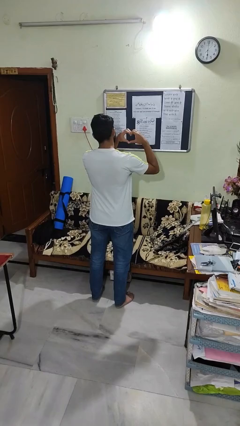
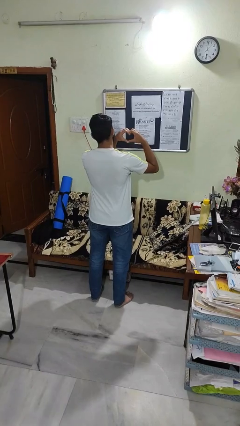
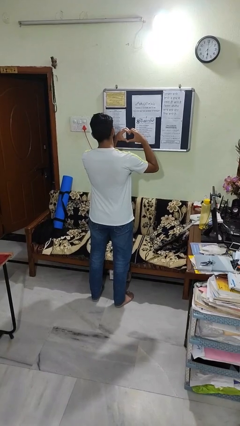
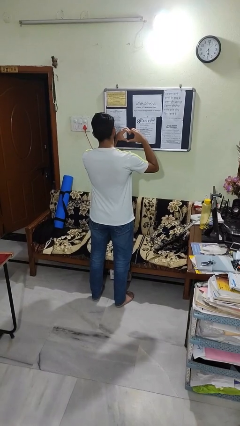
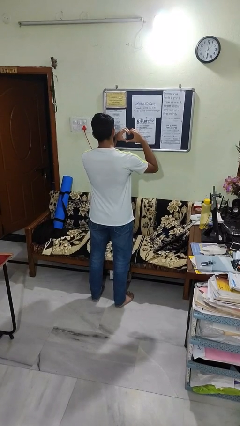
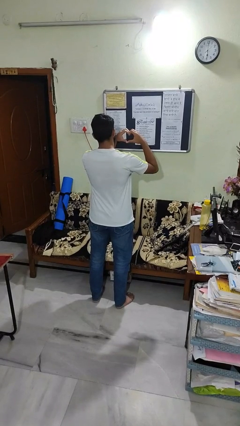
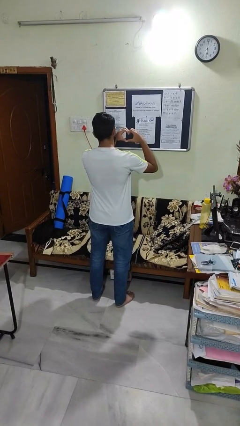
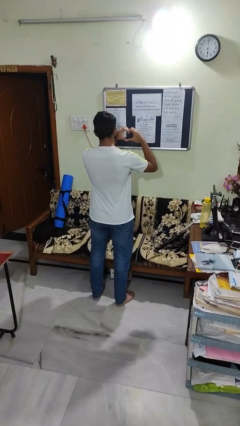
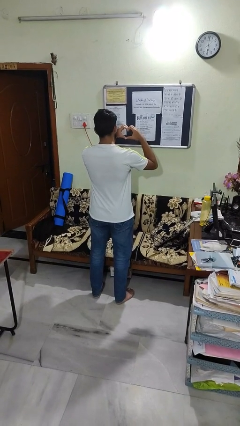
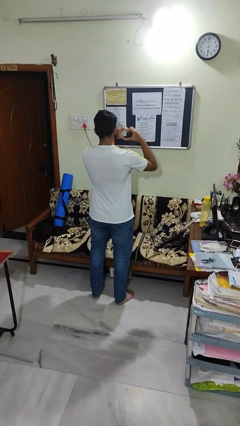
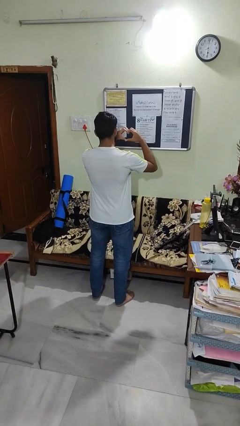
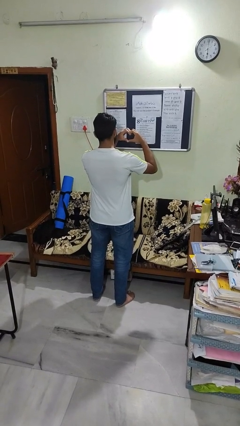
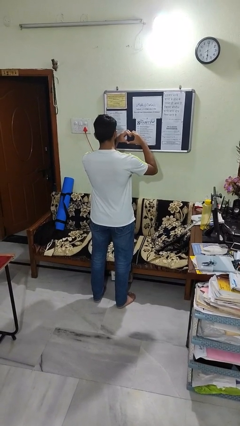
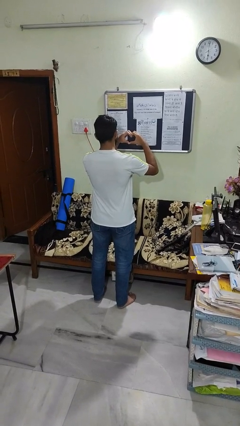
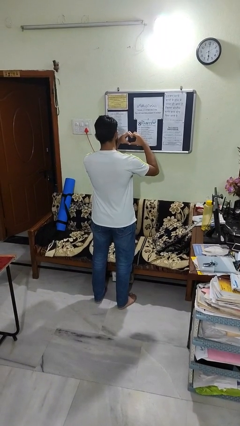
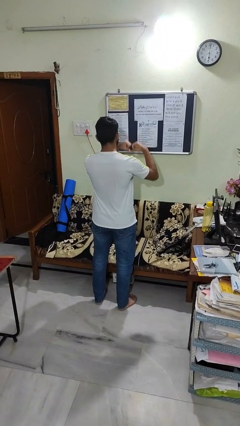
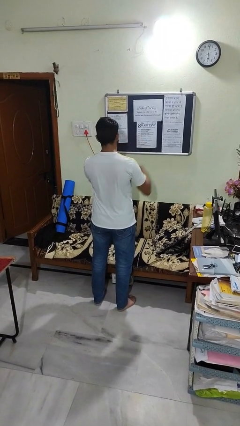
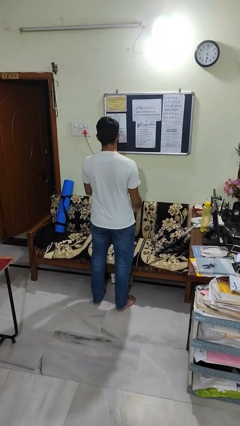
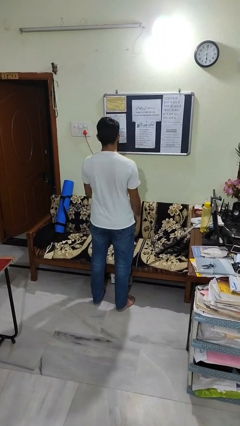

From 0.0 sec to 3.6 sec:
person gestures heart

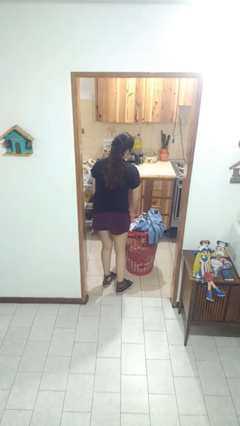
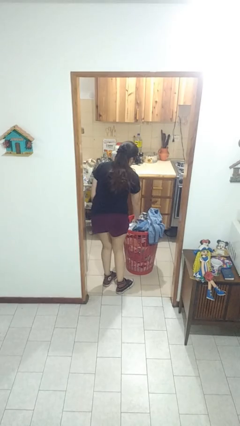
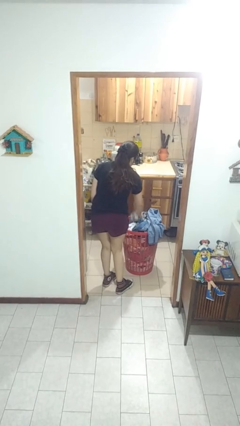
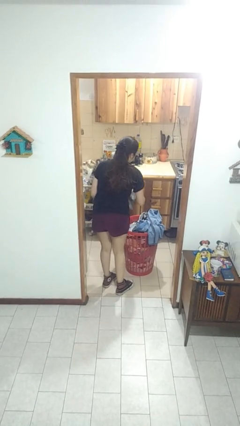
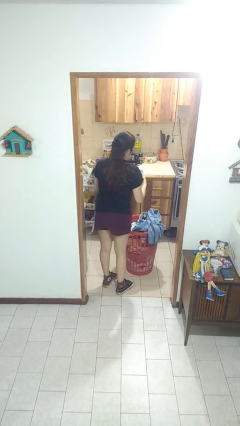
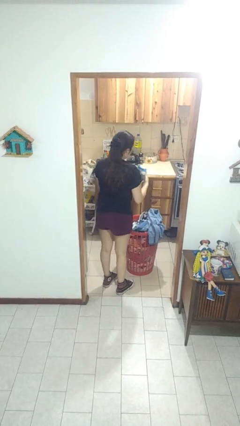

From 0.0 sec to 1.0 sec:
person takes object from basket

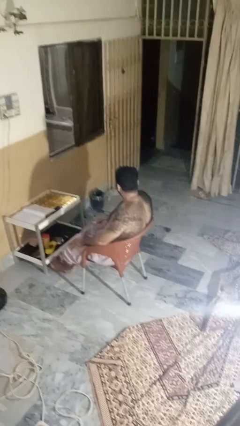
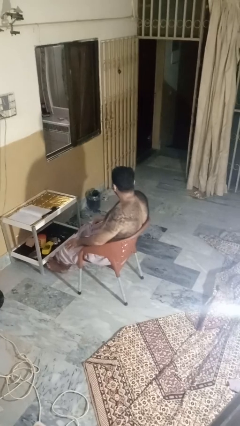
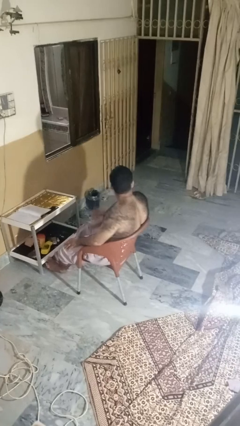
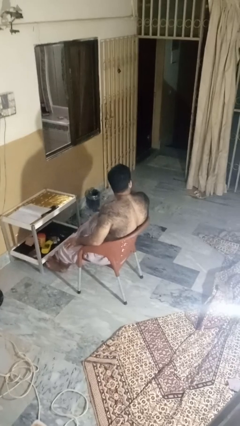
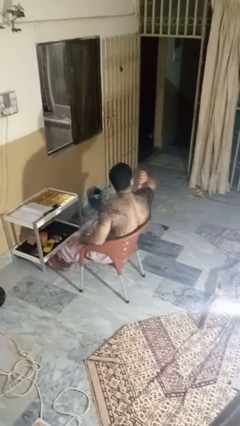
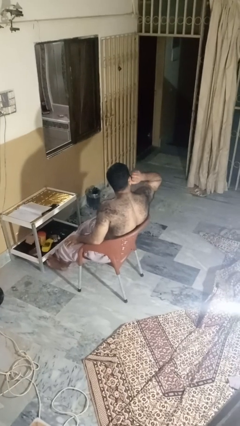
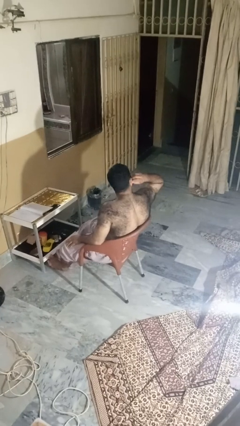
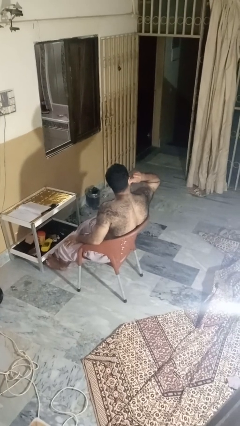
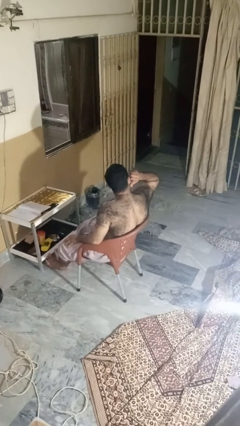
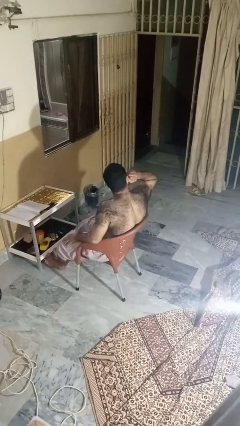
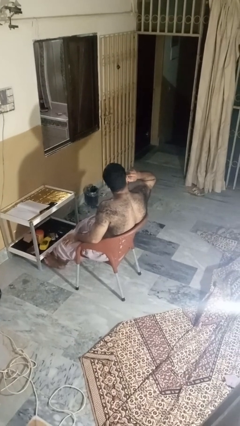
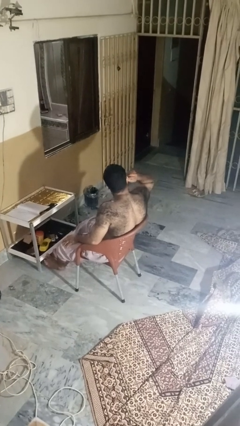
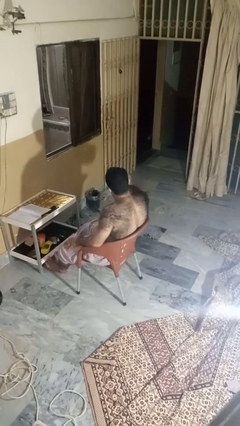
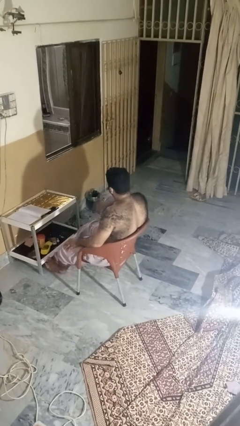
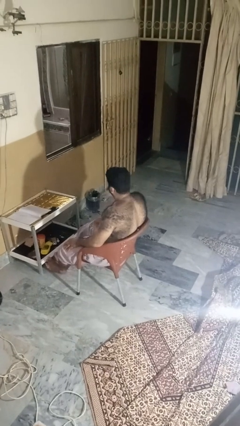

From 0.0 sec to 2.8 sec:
person touches earlobe

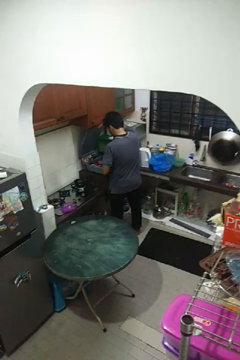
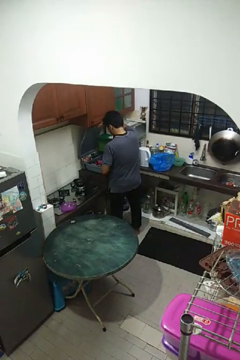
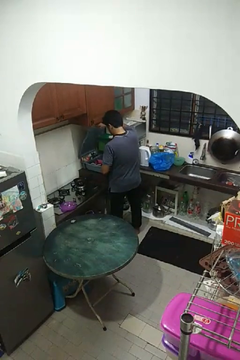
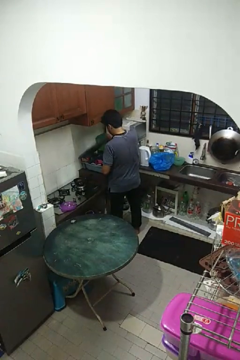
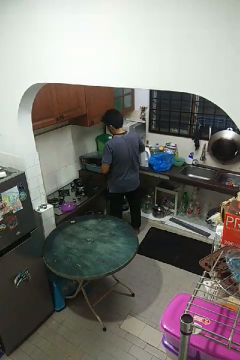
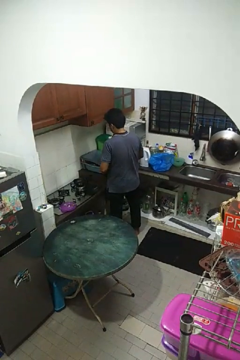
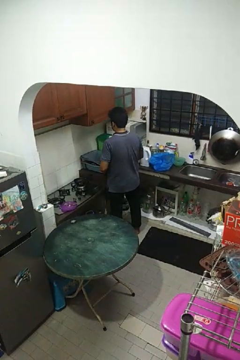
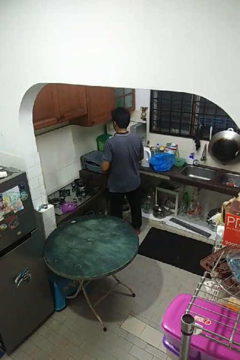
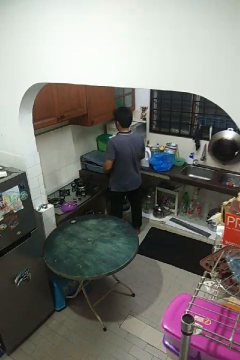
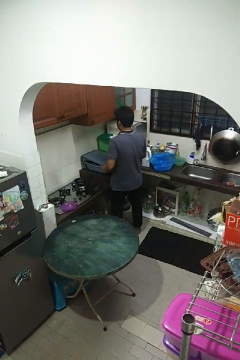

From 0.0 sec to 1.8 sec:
person closes dishwasher

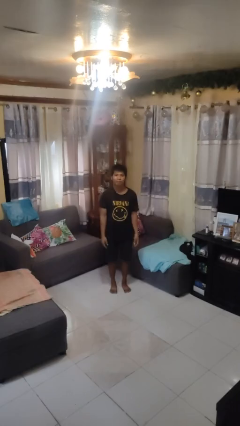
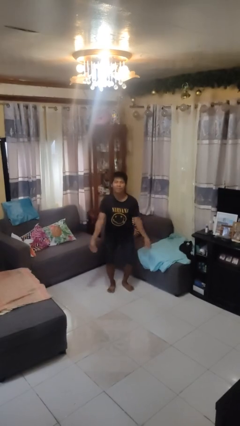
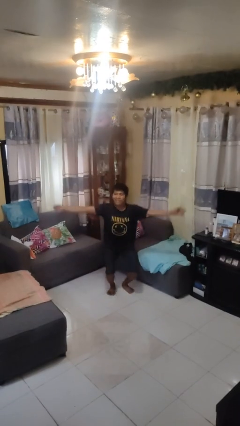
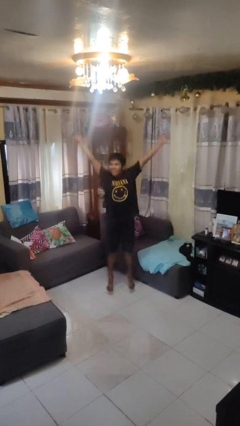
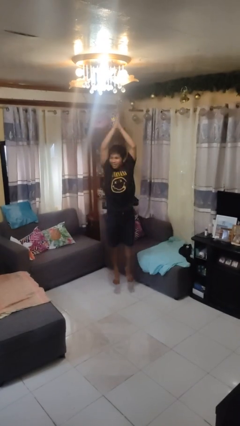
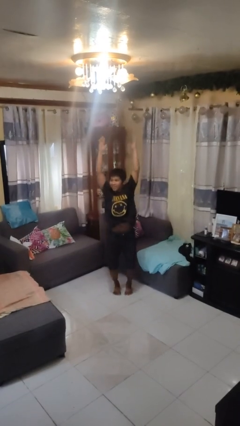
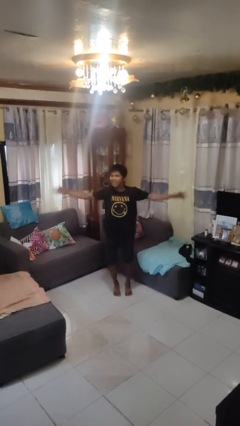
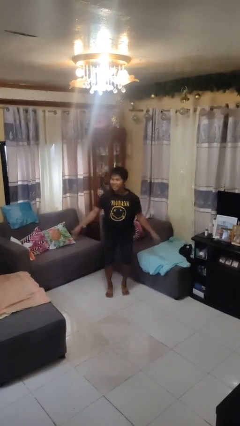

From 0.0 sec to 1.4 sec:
person exercises with jumping jacks

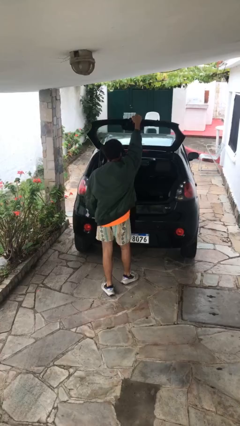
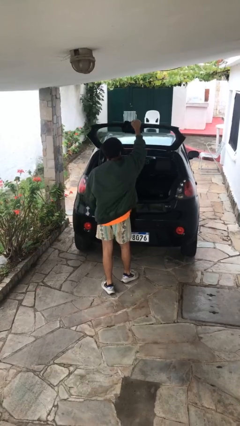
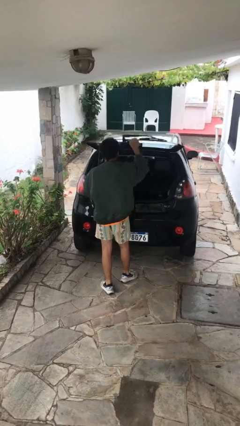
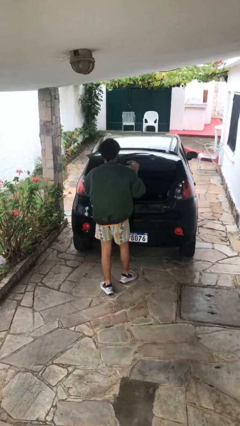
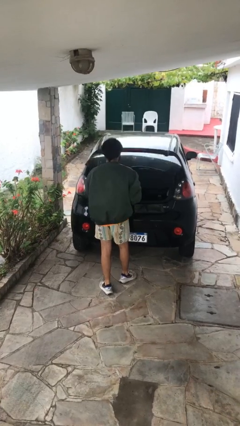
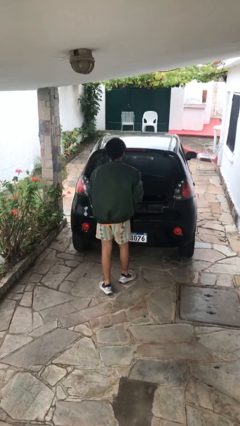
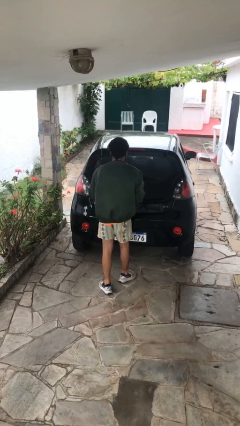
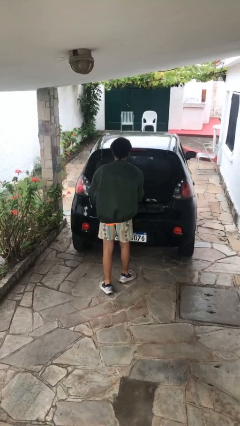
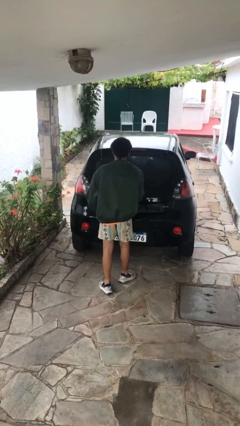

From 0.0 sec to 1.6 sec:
person closes car trunk

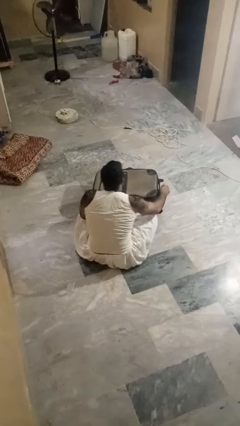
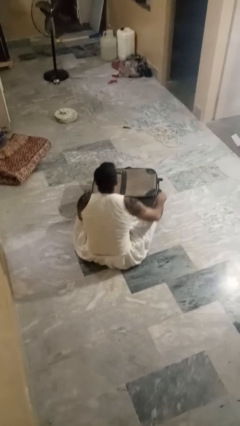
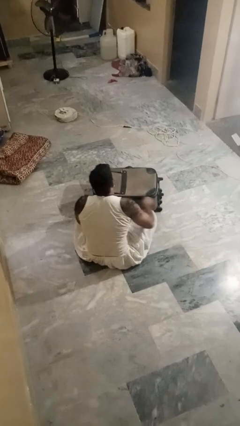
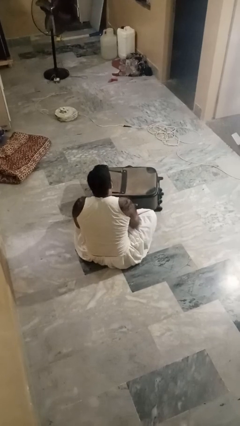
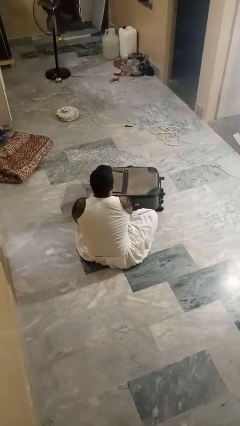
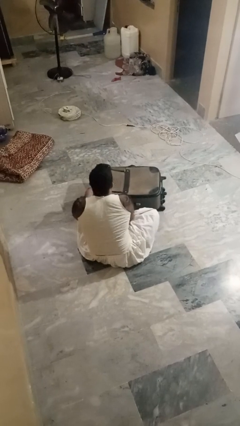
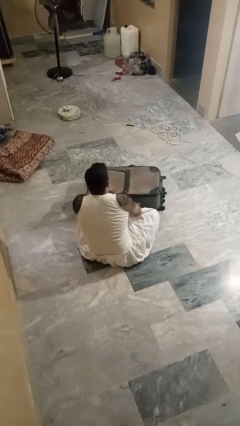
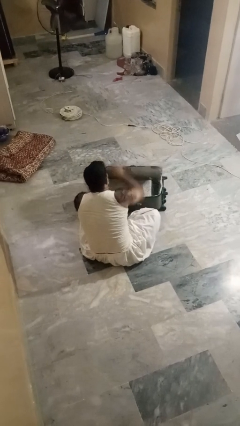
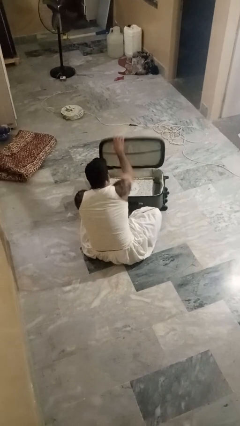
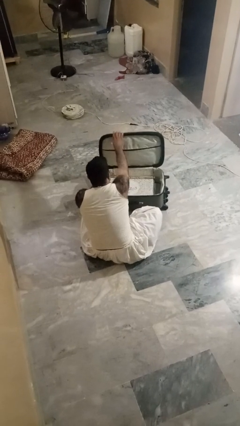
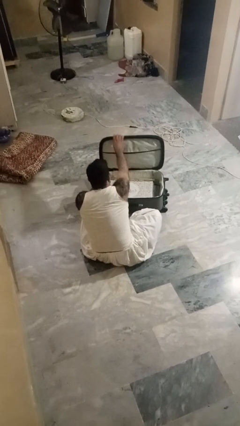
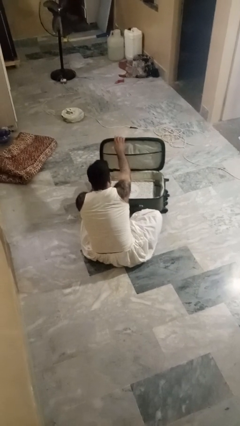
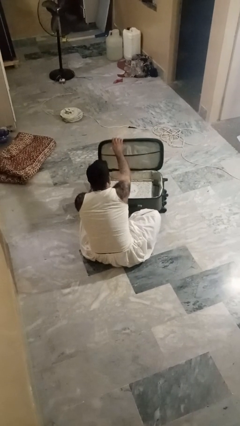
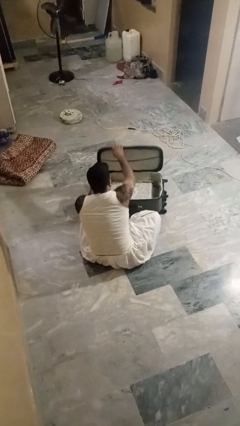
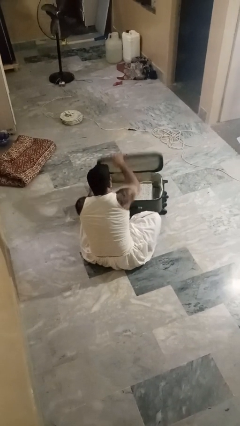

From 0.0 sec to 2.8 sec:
person opens suitcase

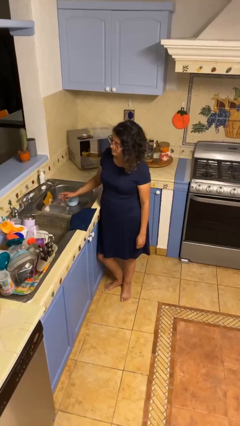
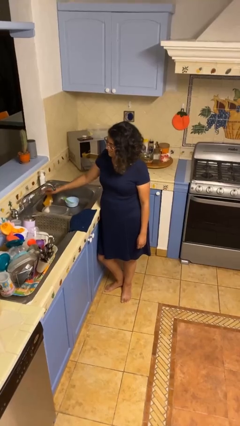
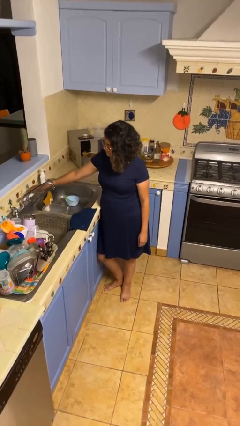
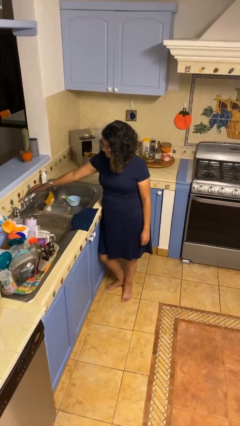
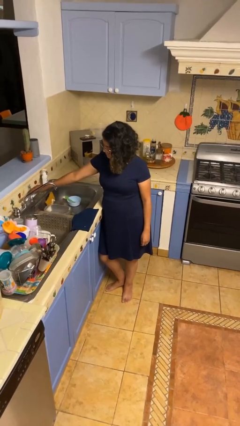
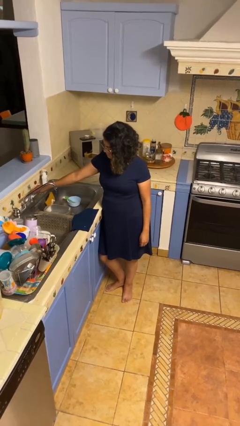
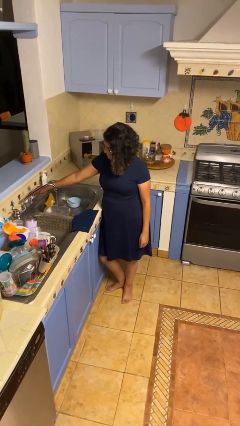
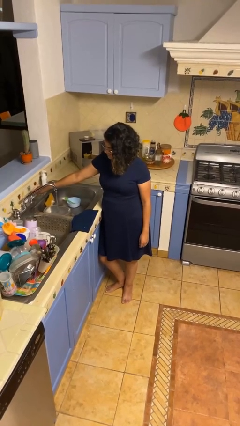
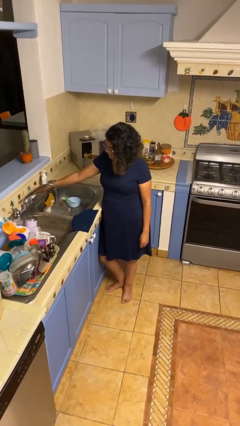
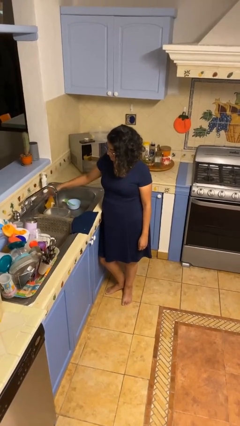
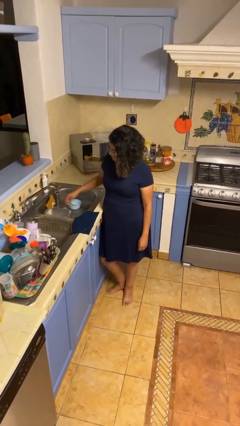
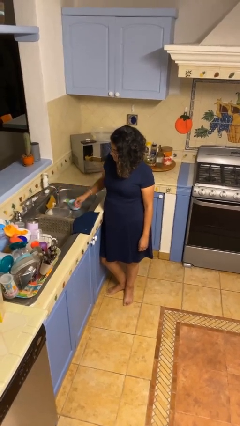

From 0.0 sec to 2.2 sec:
person turns on faucet

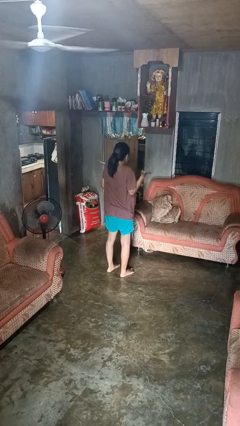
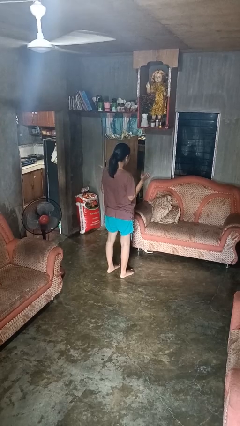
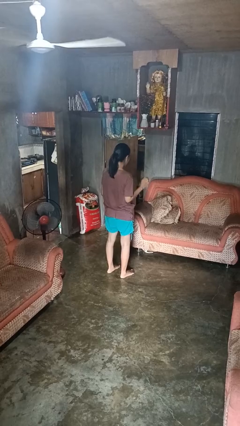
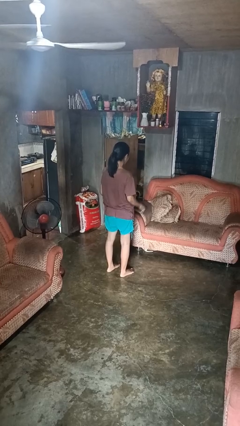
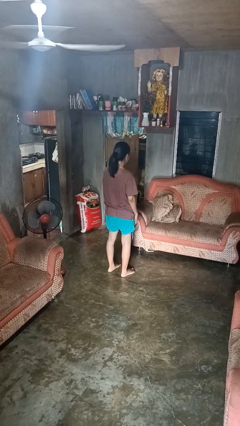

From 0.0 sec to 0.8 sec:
person shrugs
